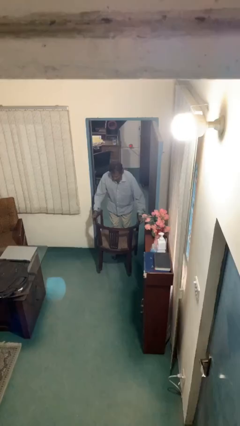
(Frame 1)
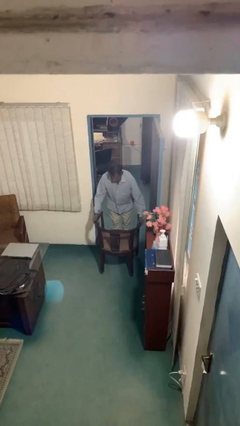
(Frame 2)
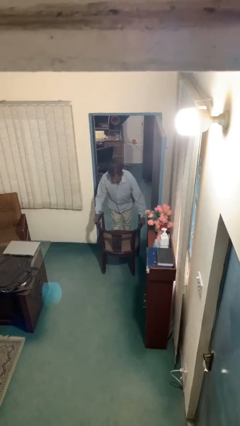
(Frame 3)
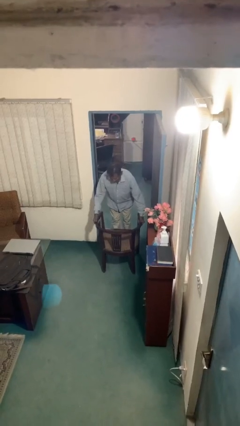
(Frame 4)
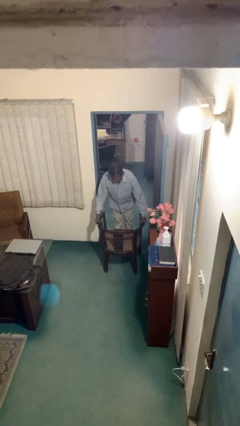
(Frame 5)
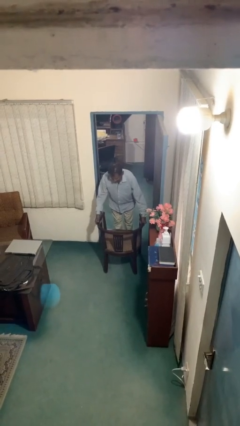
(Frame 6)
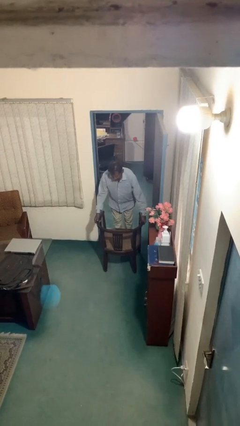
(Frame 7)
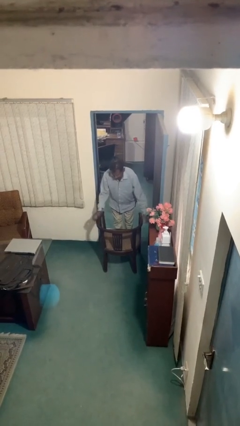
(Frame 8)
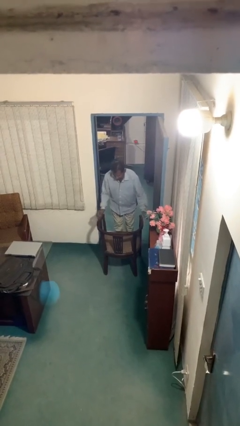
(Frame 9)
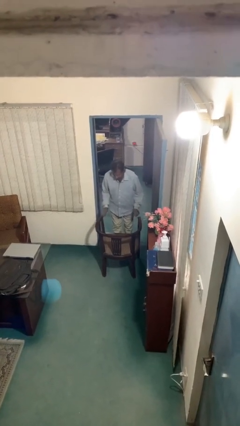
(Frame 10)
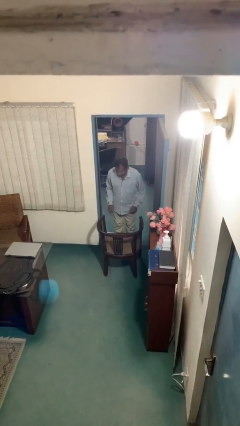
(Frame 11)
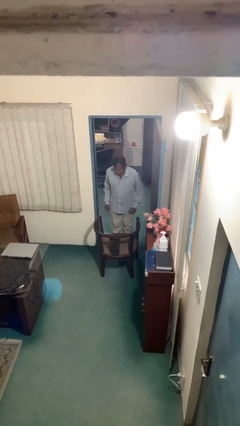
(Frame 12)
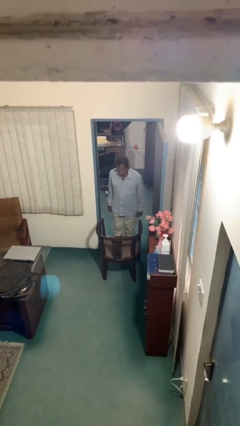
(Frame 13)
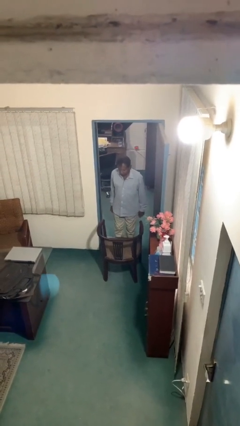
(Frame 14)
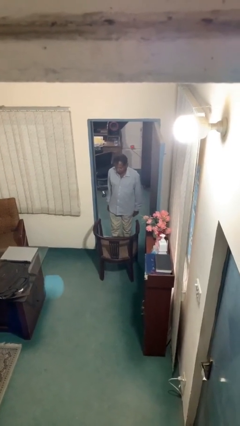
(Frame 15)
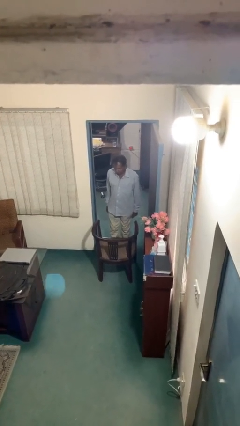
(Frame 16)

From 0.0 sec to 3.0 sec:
person puts down object on floor

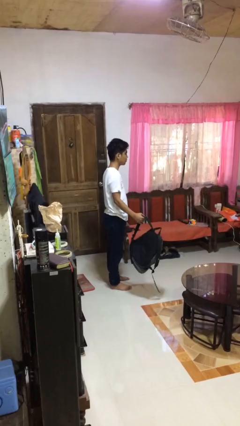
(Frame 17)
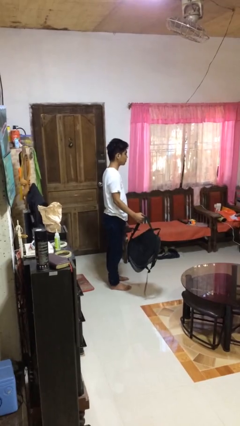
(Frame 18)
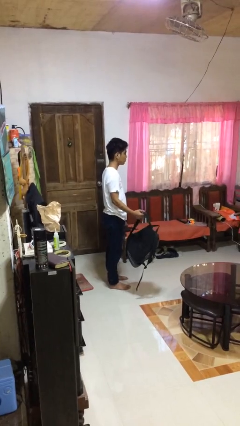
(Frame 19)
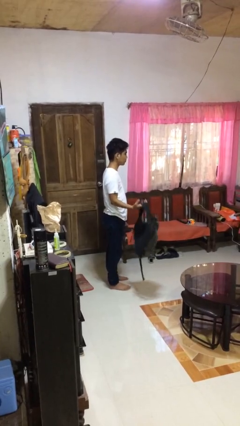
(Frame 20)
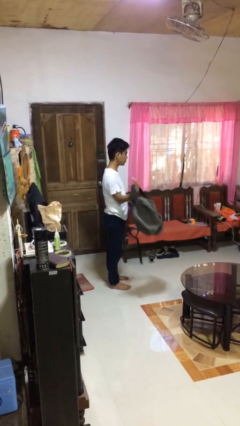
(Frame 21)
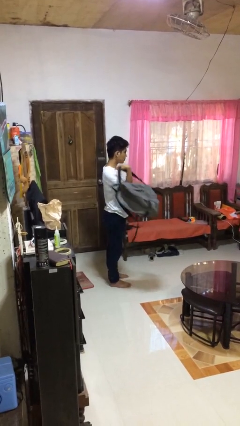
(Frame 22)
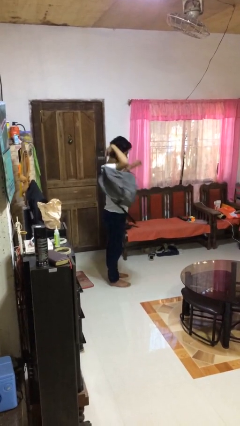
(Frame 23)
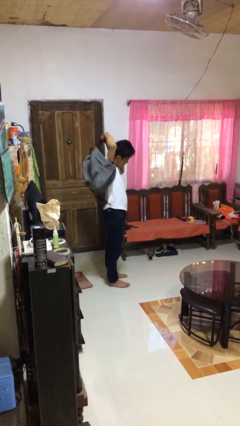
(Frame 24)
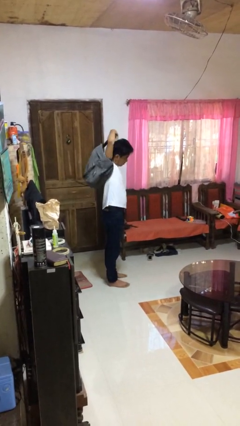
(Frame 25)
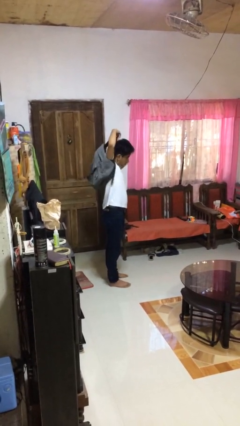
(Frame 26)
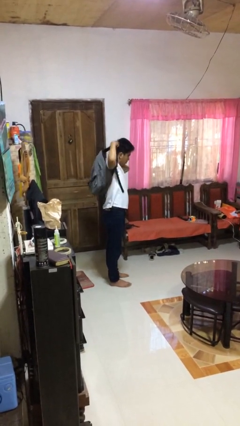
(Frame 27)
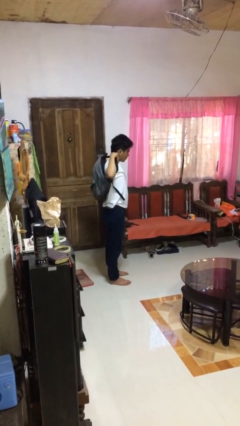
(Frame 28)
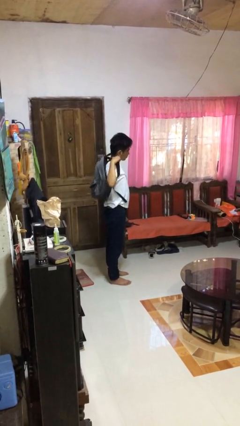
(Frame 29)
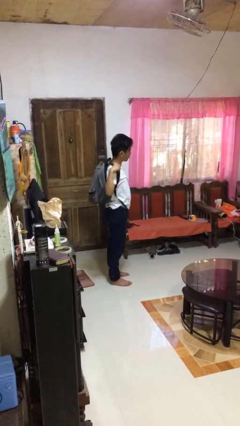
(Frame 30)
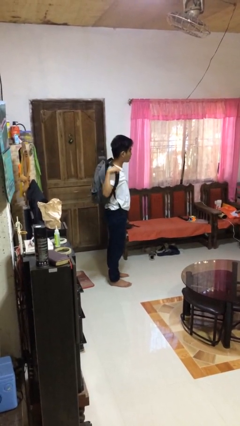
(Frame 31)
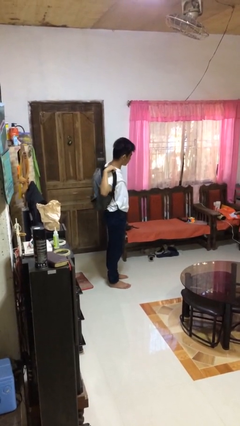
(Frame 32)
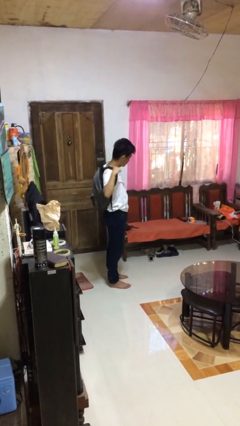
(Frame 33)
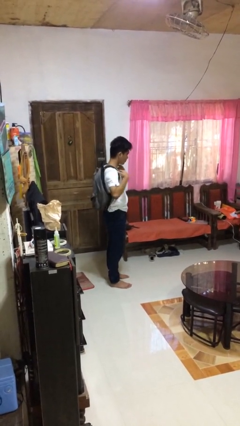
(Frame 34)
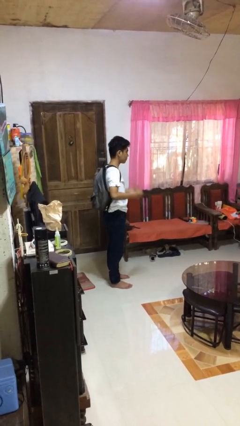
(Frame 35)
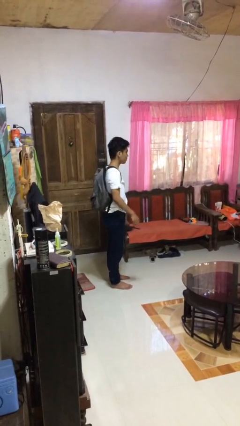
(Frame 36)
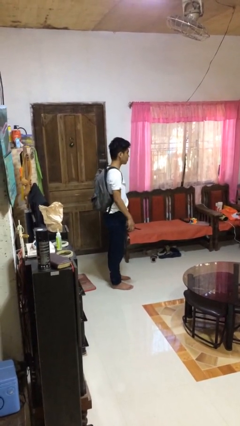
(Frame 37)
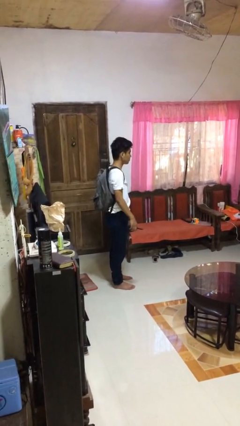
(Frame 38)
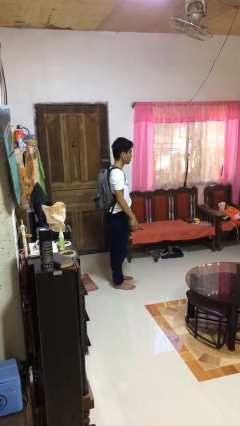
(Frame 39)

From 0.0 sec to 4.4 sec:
person puts on backpack

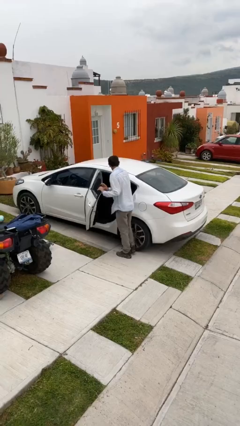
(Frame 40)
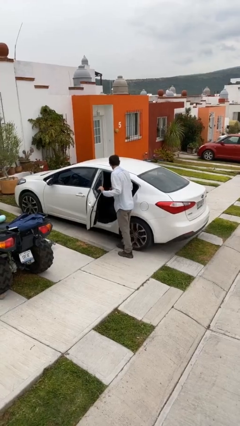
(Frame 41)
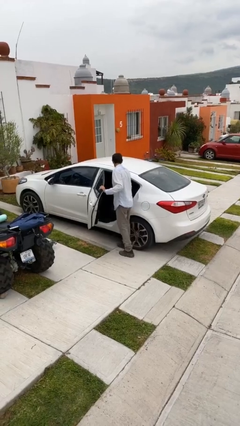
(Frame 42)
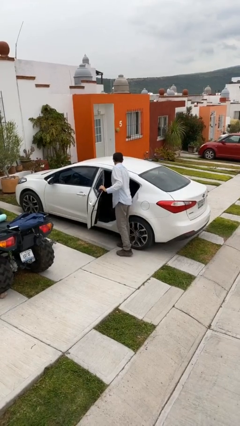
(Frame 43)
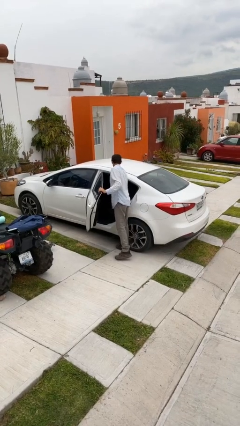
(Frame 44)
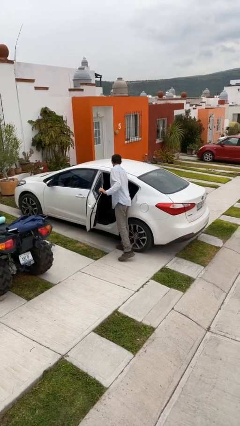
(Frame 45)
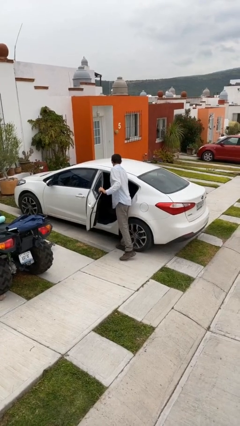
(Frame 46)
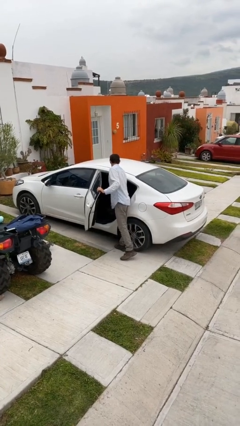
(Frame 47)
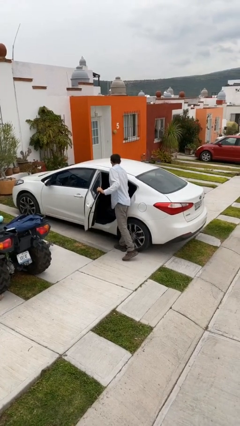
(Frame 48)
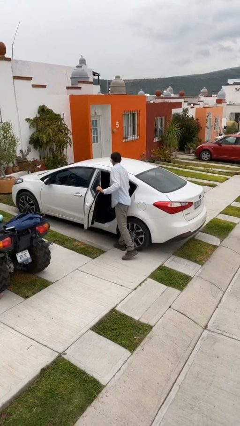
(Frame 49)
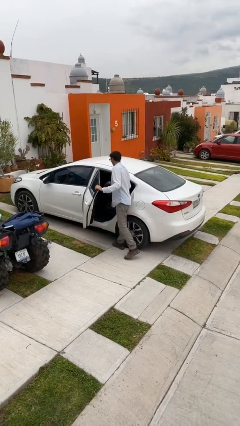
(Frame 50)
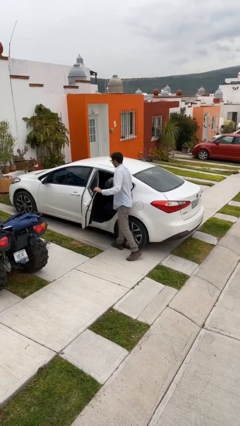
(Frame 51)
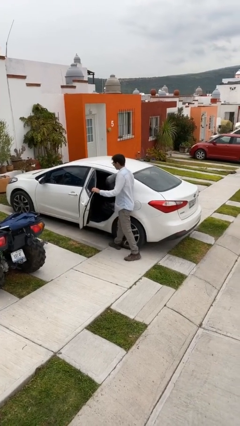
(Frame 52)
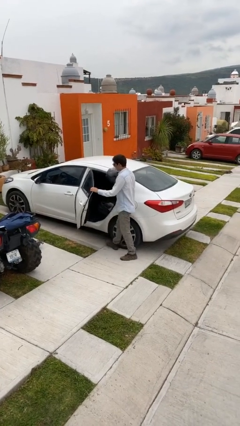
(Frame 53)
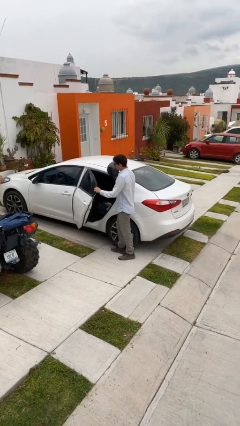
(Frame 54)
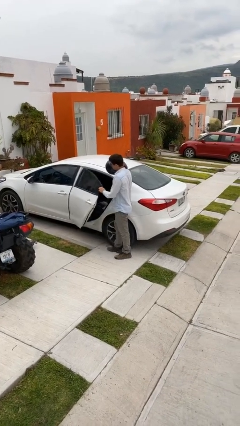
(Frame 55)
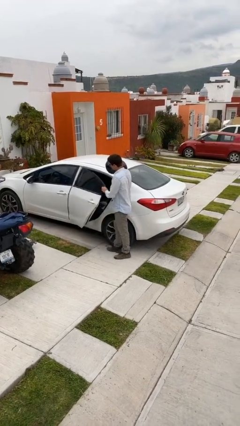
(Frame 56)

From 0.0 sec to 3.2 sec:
person unloads car

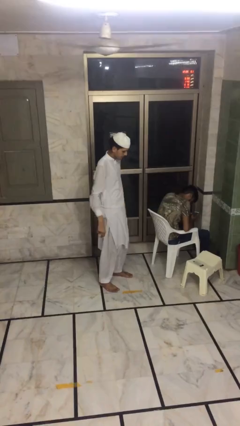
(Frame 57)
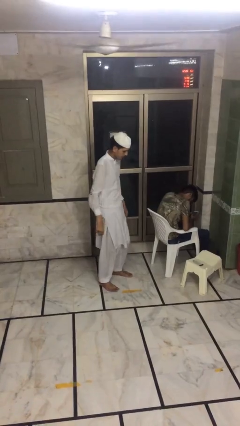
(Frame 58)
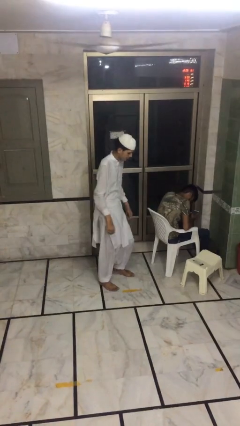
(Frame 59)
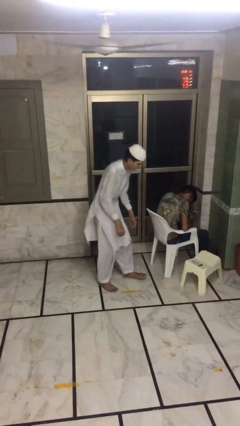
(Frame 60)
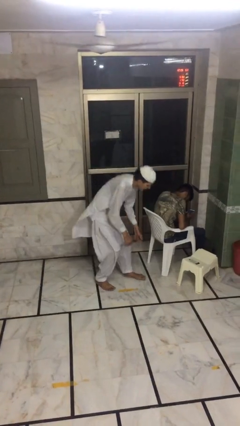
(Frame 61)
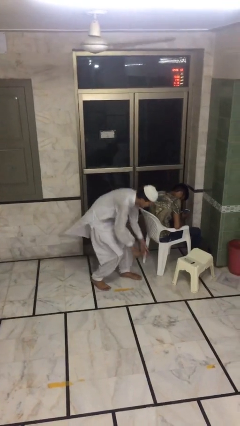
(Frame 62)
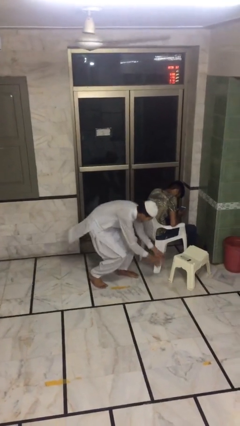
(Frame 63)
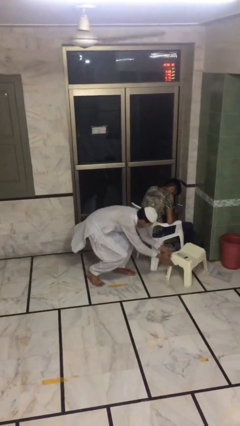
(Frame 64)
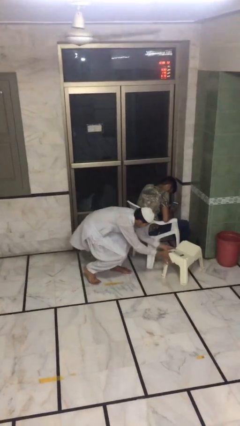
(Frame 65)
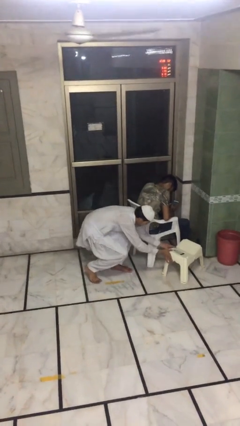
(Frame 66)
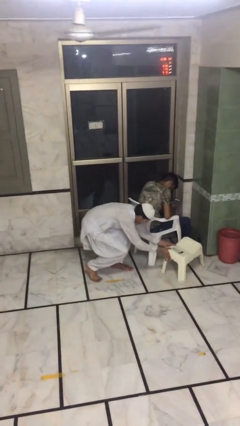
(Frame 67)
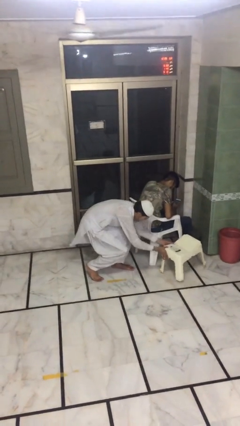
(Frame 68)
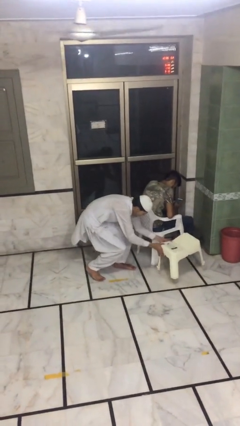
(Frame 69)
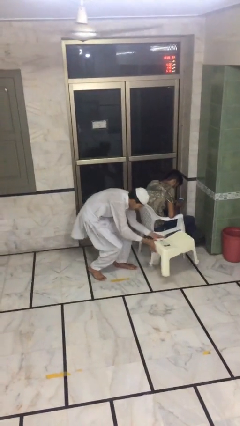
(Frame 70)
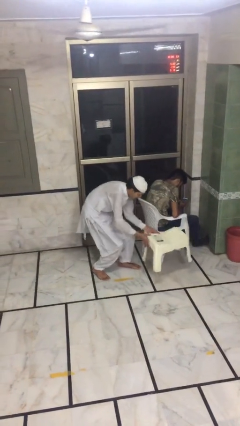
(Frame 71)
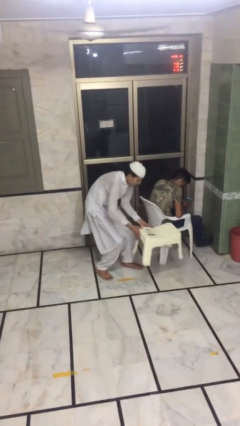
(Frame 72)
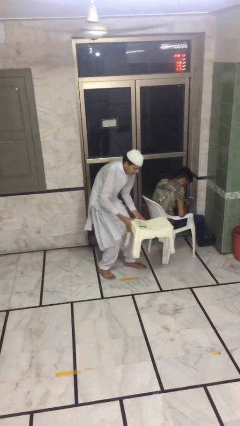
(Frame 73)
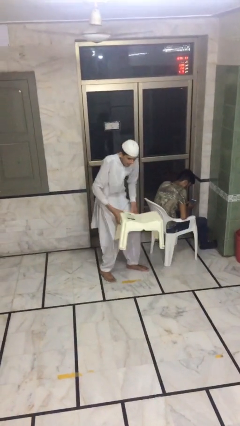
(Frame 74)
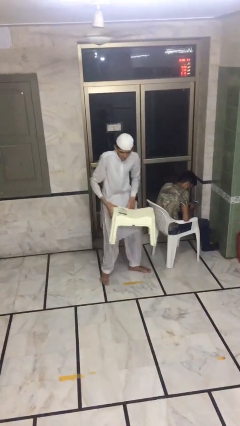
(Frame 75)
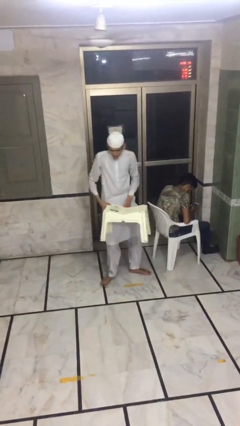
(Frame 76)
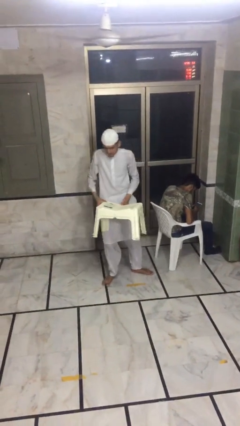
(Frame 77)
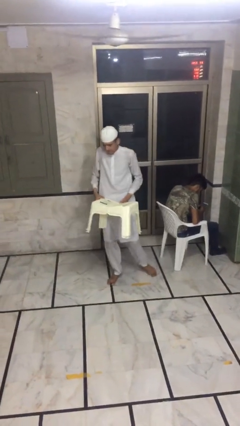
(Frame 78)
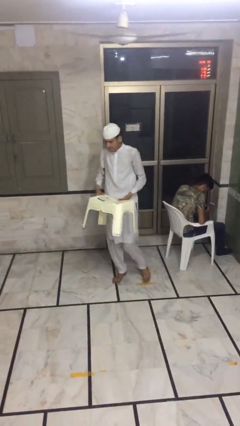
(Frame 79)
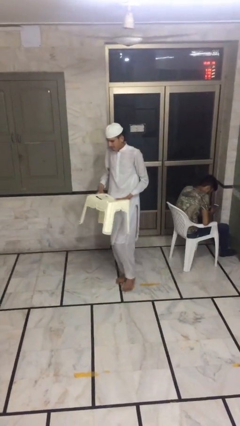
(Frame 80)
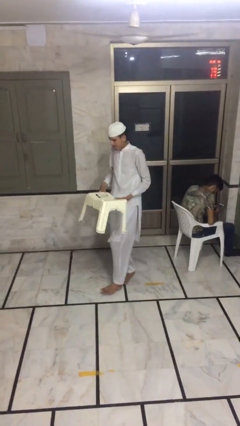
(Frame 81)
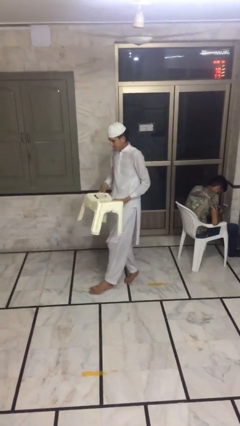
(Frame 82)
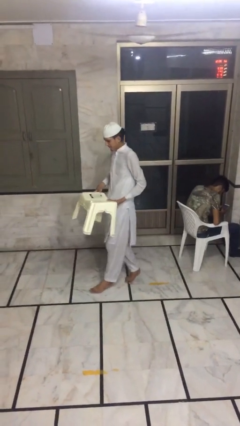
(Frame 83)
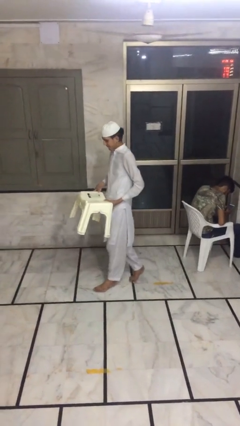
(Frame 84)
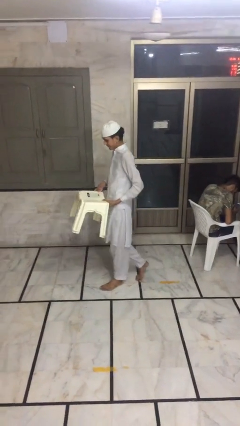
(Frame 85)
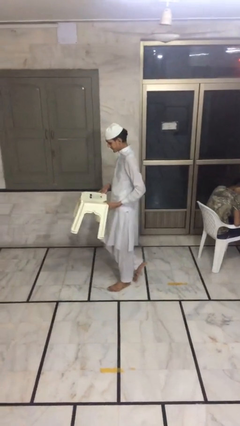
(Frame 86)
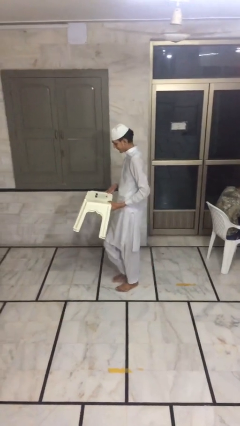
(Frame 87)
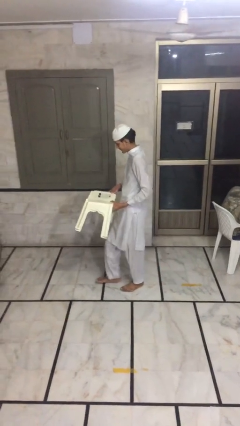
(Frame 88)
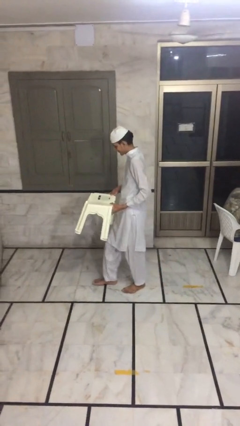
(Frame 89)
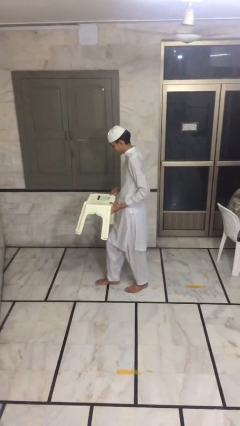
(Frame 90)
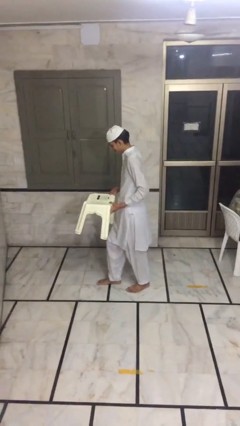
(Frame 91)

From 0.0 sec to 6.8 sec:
person steals object from person
